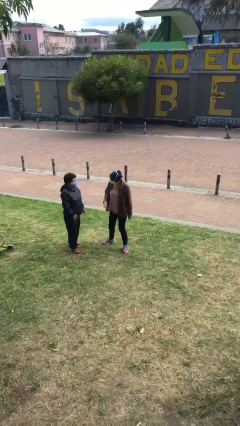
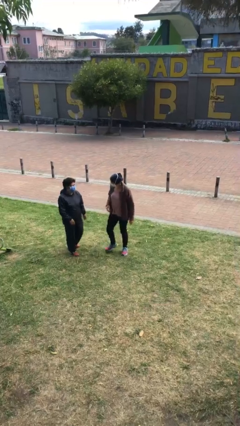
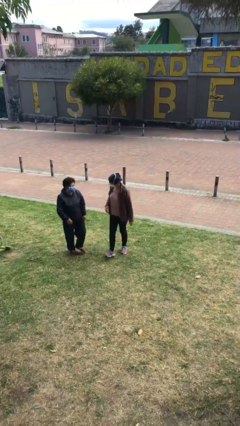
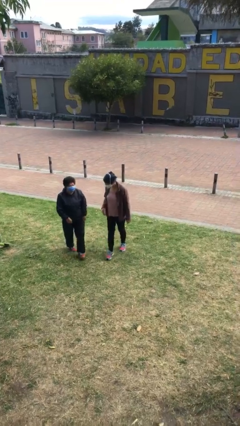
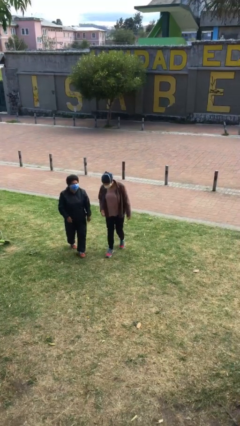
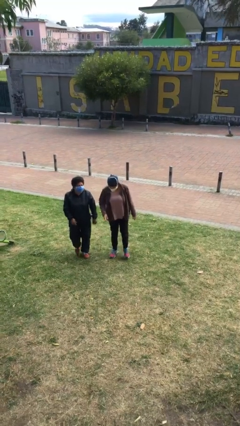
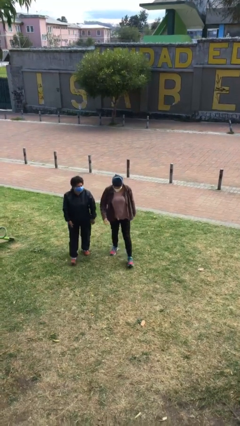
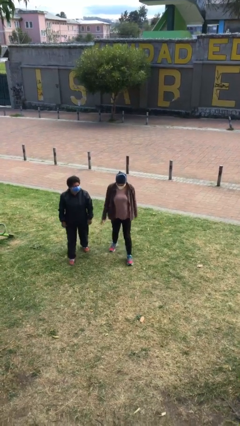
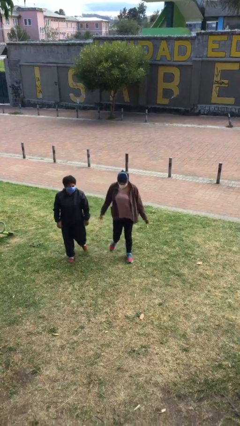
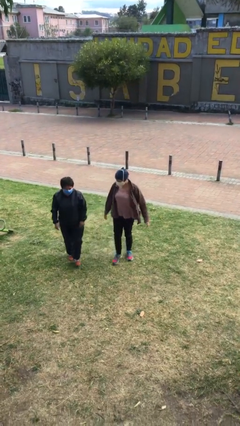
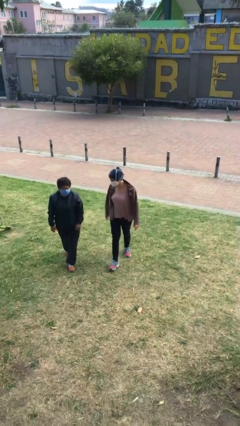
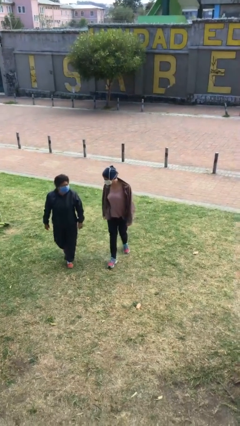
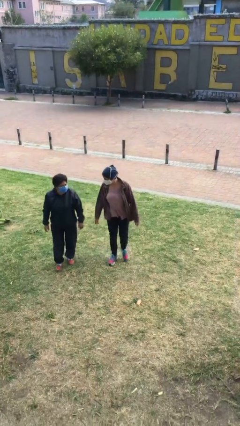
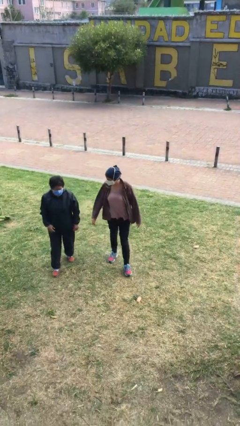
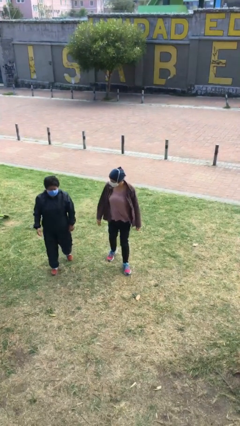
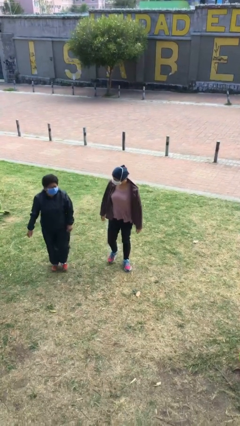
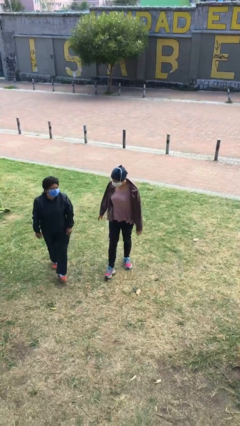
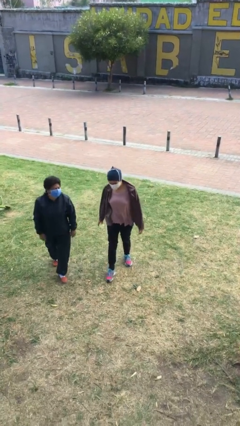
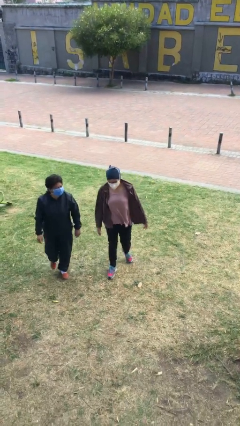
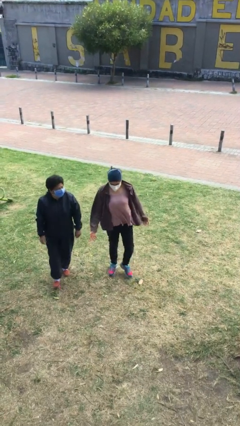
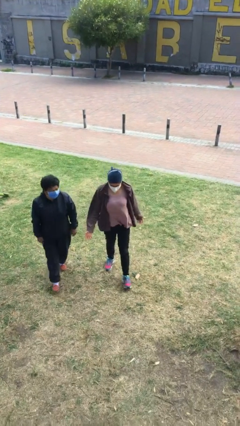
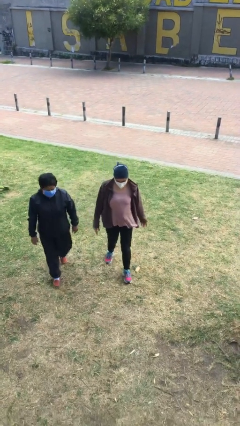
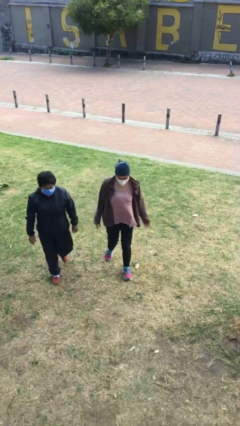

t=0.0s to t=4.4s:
person talks to person

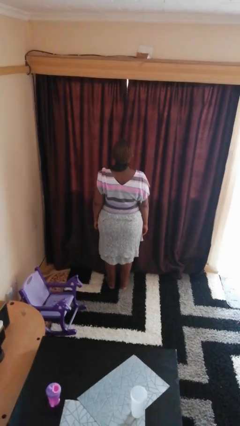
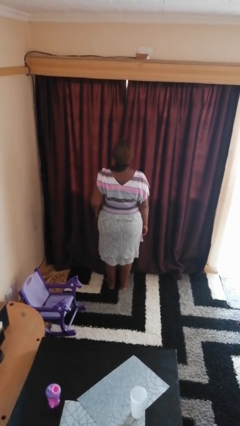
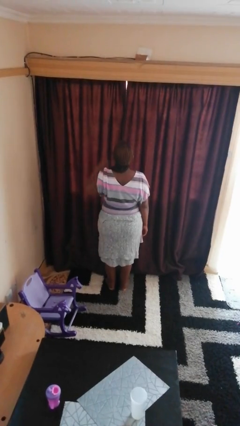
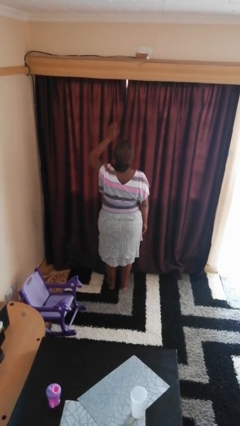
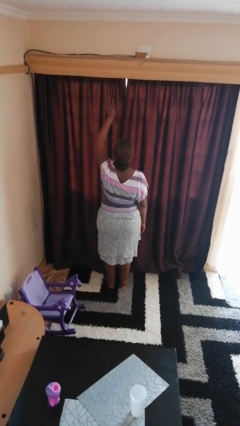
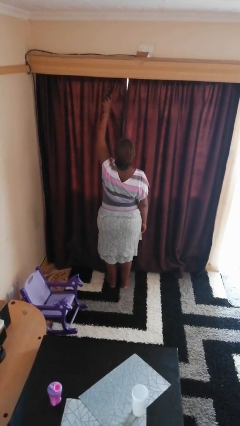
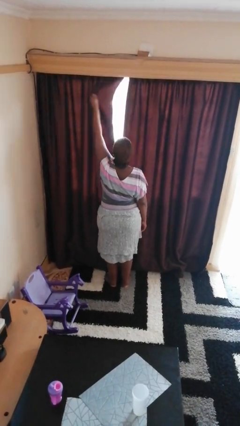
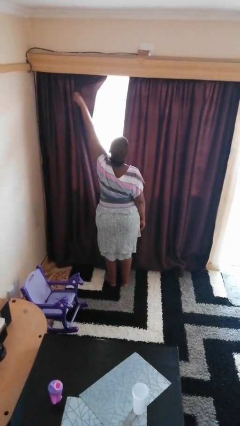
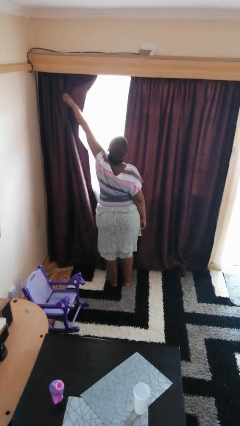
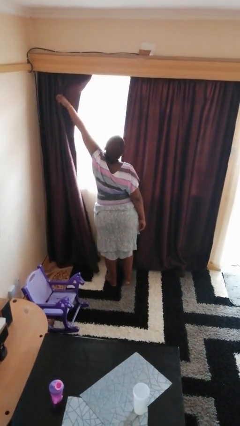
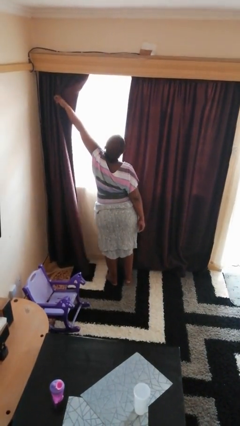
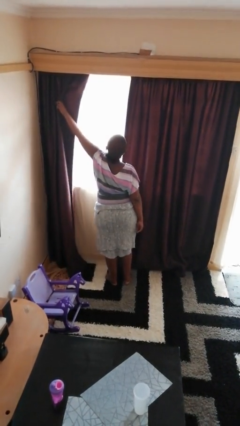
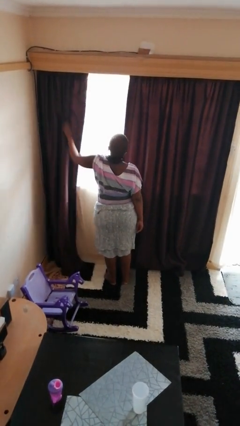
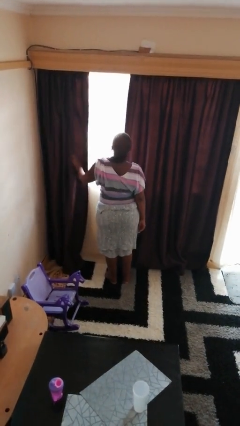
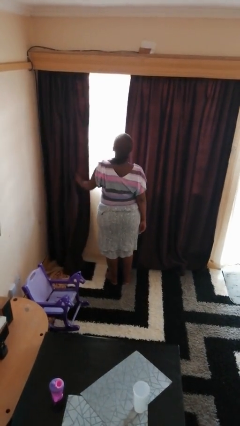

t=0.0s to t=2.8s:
person opens curtains

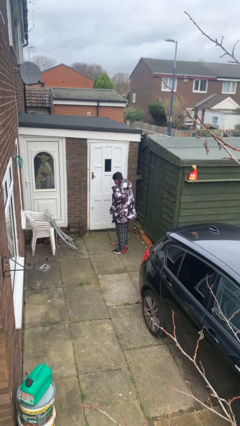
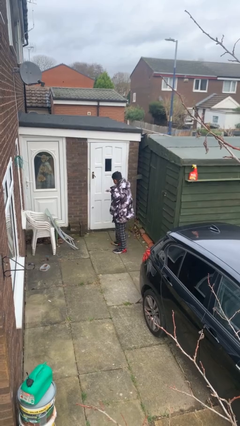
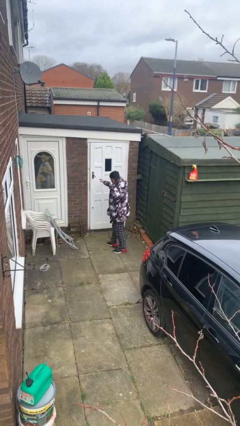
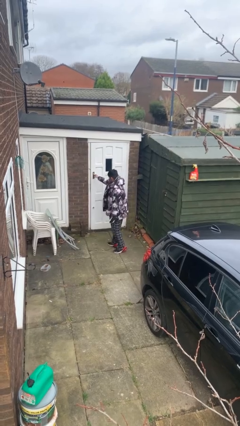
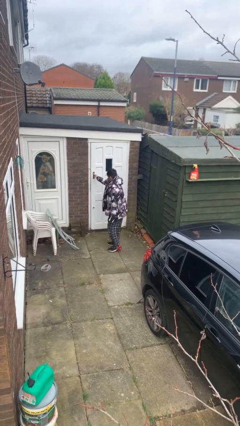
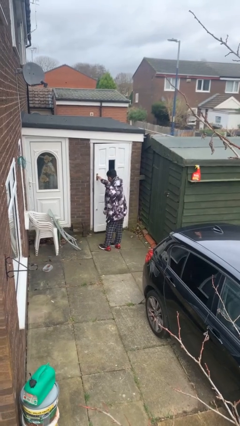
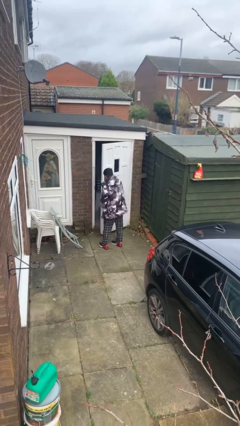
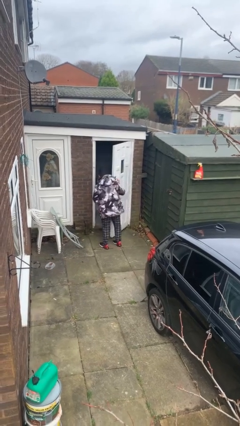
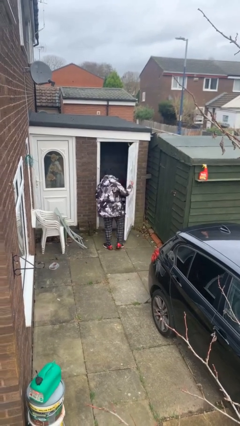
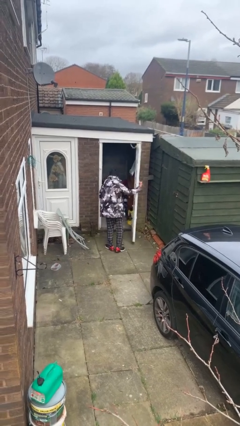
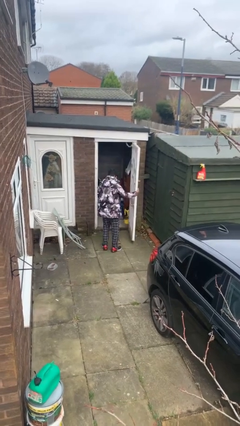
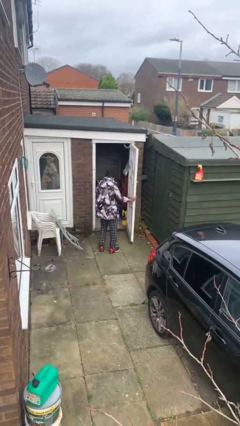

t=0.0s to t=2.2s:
person opens facility door

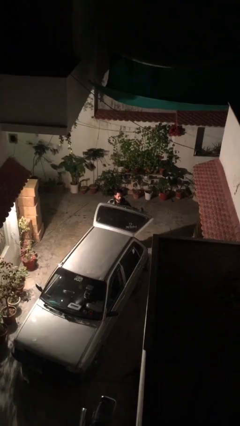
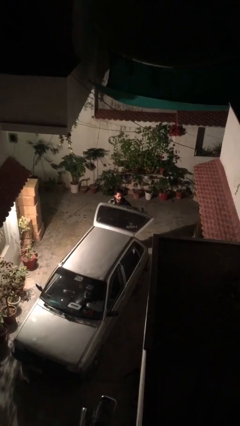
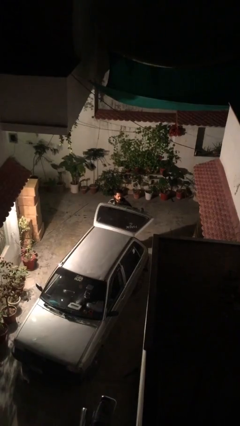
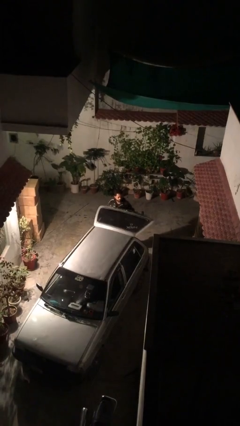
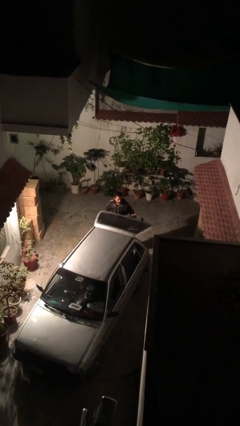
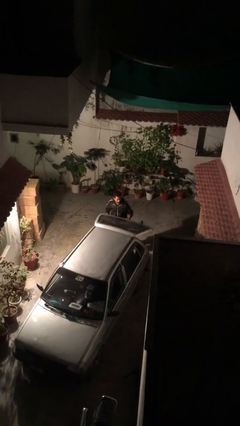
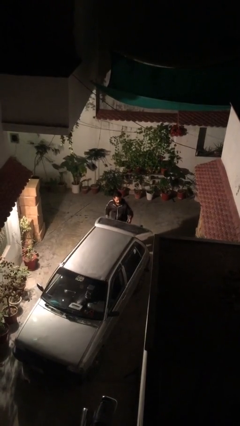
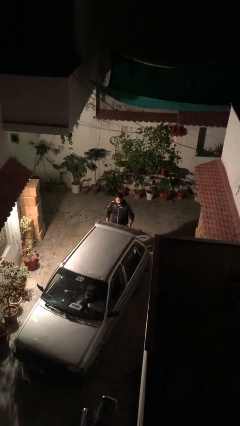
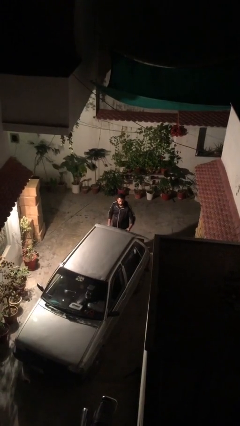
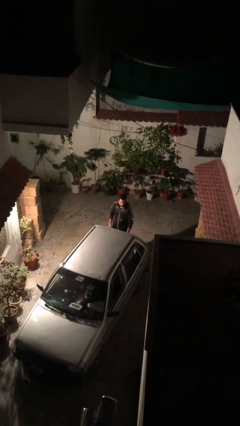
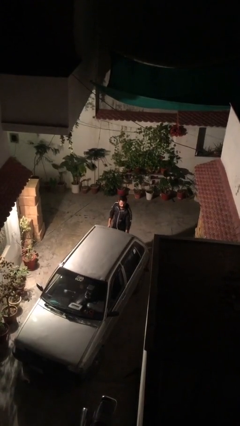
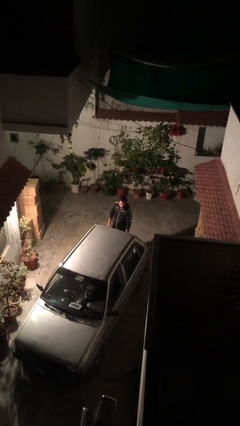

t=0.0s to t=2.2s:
person closes car trunk

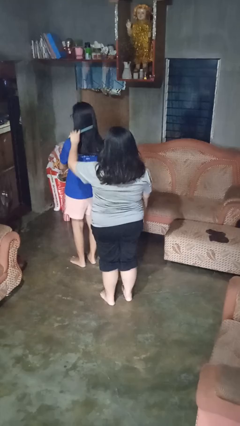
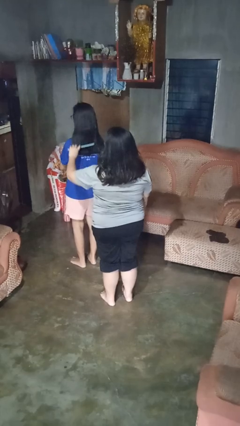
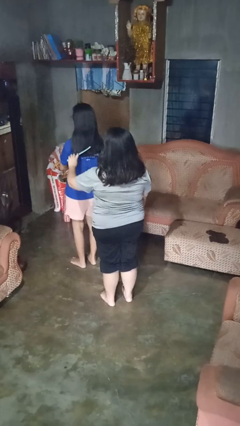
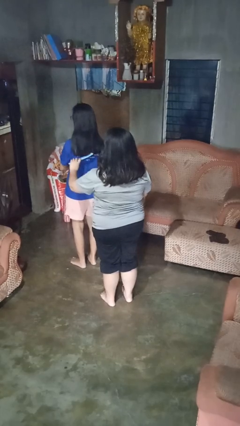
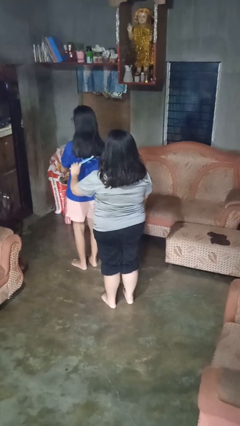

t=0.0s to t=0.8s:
person brushes hair of person

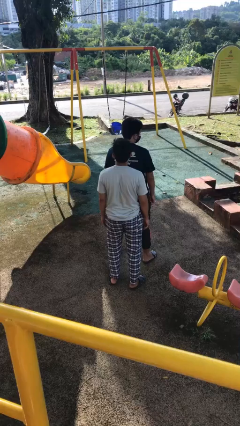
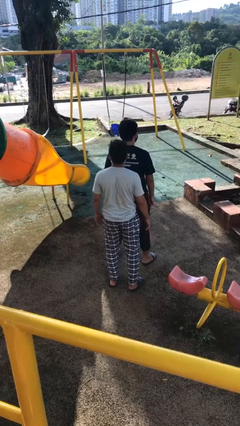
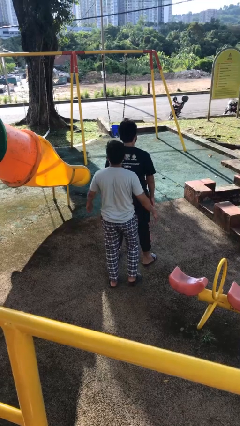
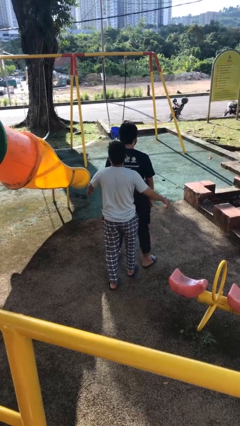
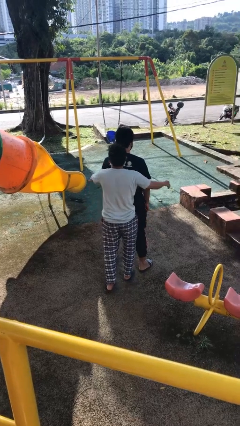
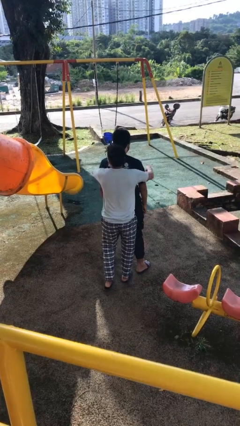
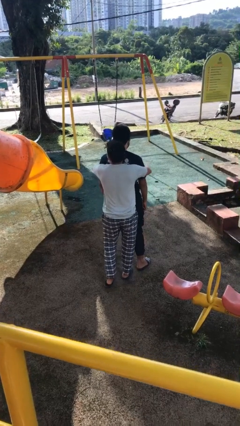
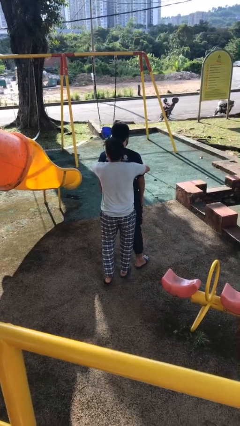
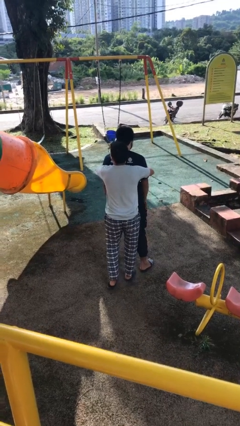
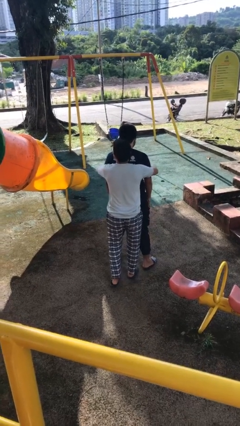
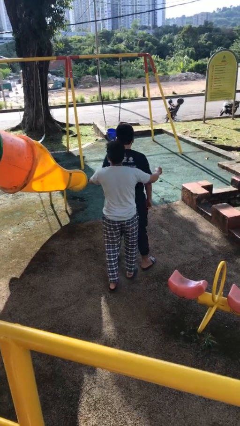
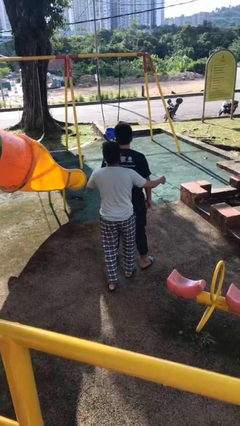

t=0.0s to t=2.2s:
person hugs person from behind

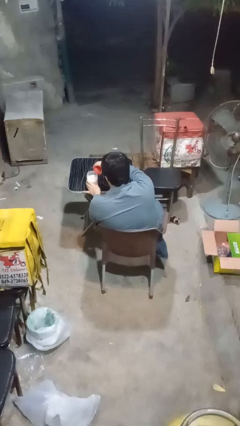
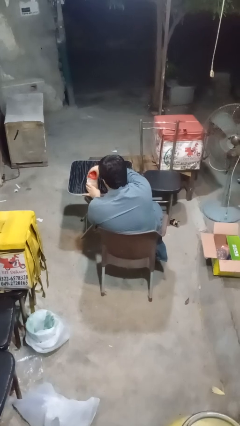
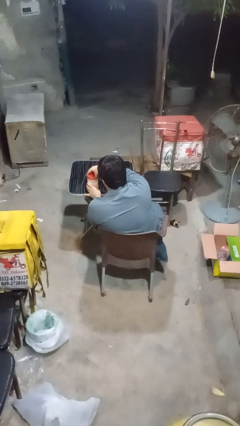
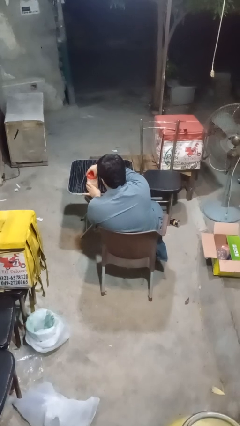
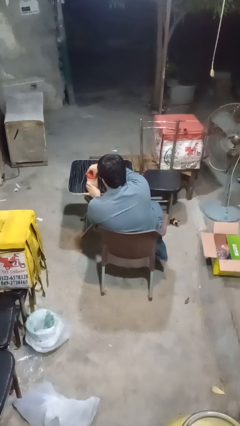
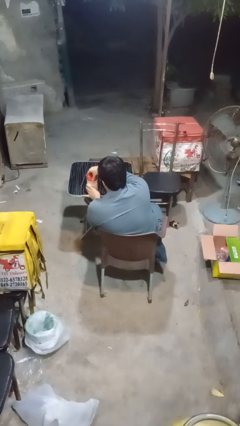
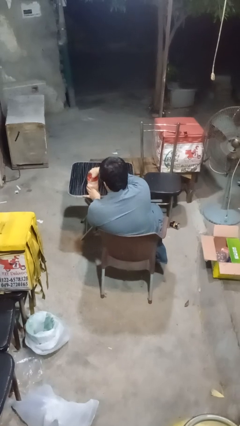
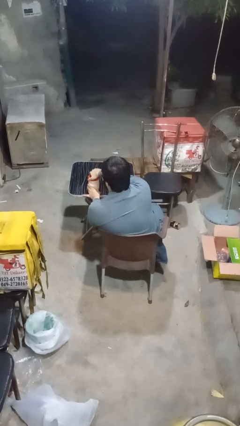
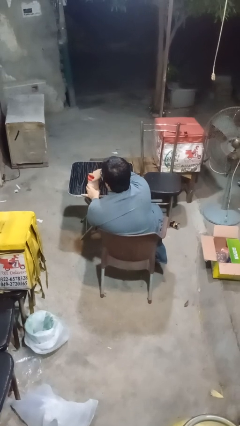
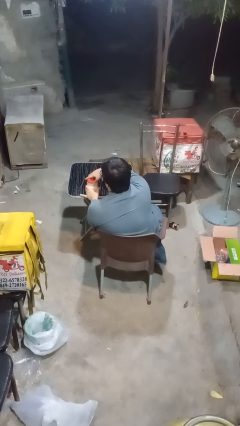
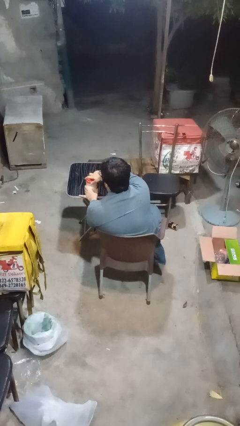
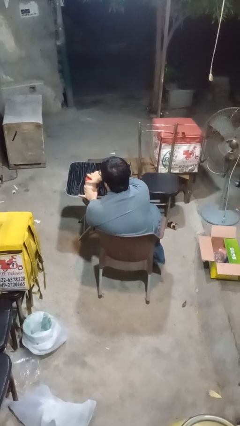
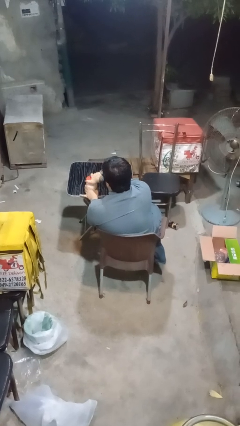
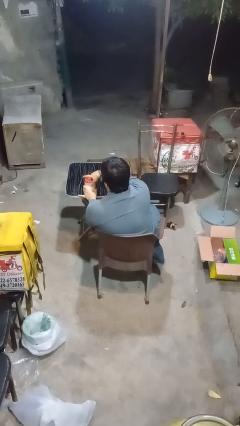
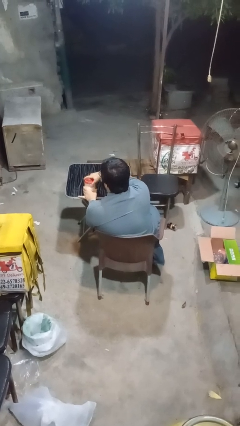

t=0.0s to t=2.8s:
person closes jar
